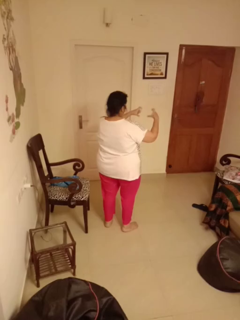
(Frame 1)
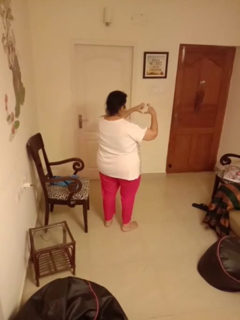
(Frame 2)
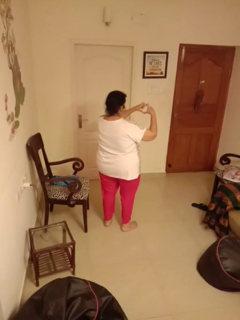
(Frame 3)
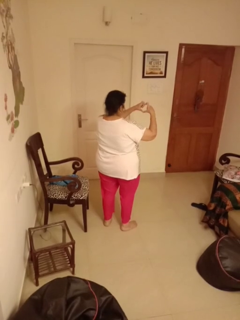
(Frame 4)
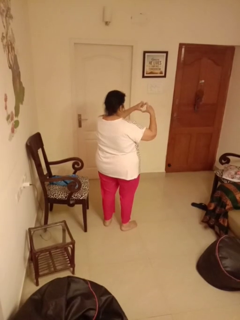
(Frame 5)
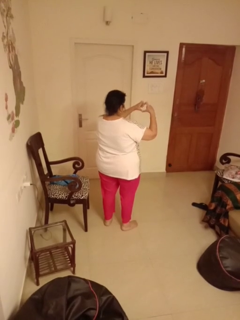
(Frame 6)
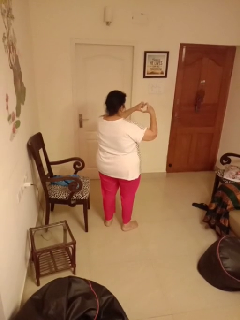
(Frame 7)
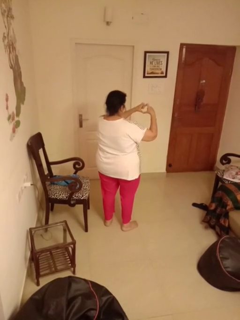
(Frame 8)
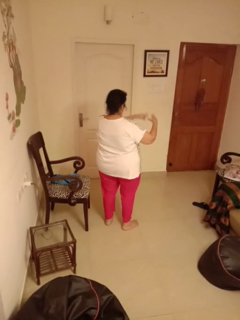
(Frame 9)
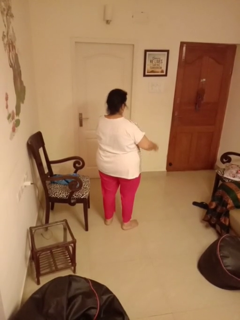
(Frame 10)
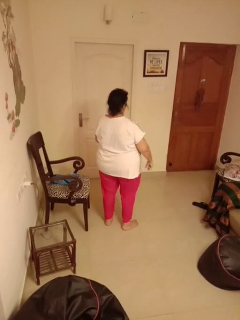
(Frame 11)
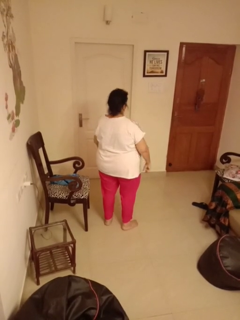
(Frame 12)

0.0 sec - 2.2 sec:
person gestures heart

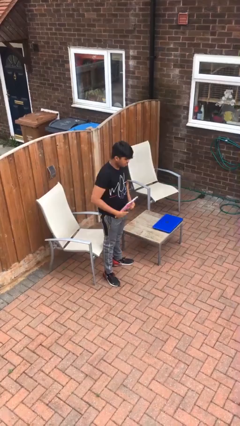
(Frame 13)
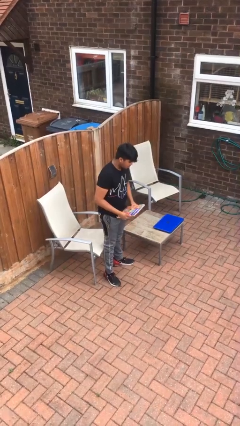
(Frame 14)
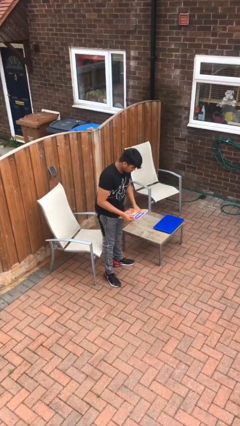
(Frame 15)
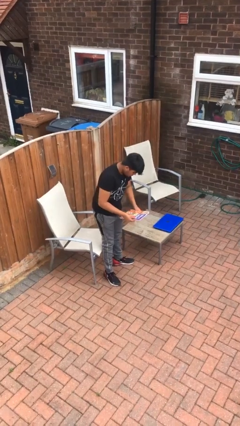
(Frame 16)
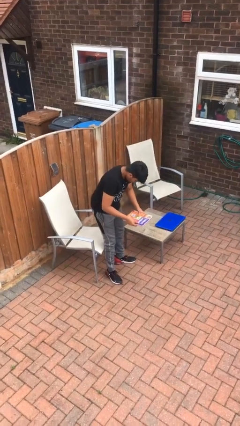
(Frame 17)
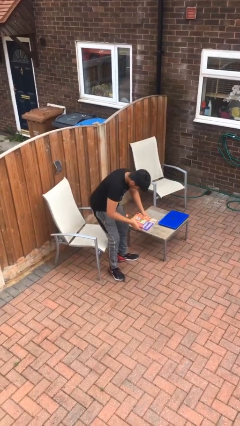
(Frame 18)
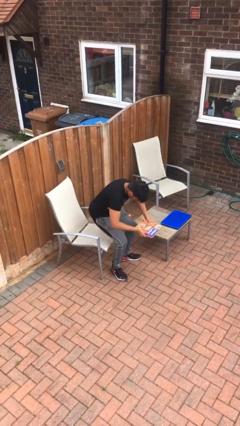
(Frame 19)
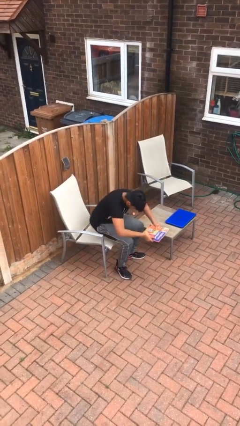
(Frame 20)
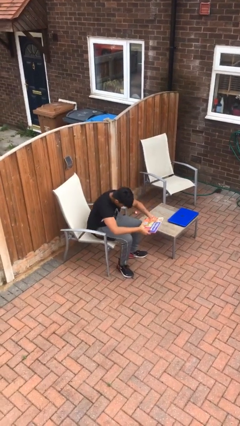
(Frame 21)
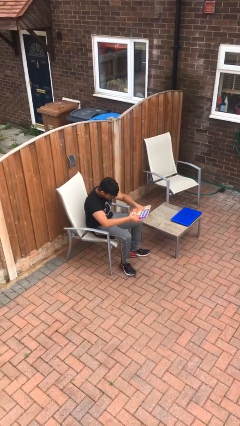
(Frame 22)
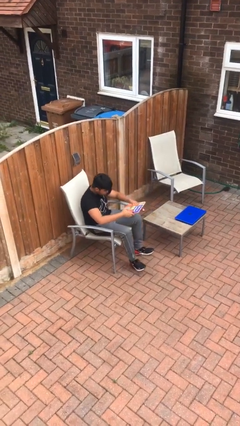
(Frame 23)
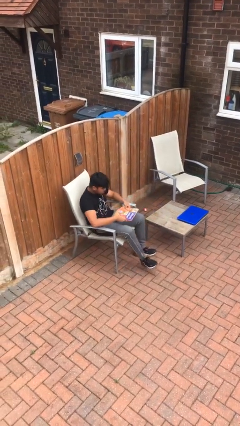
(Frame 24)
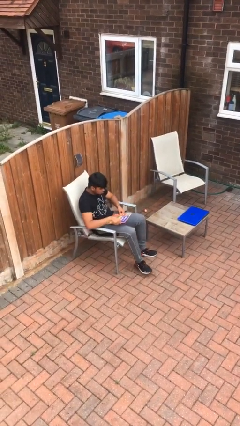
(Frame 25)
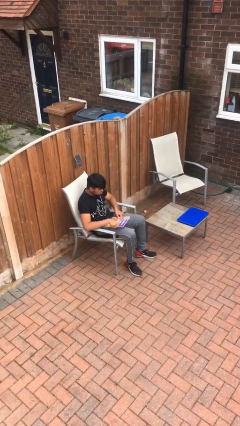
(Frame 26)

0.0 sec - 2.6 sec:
person sits down

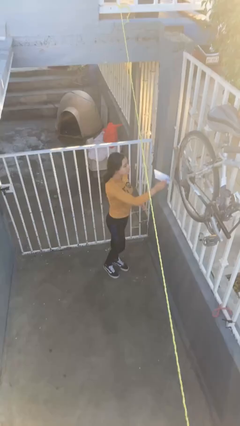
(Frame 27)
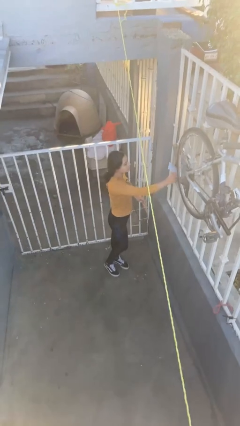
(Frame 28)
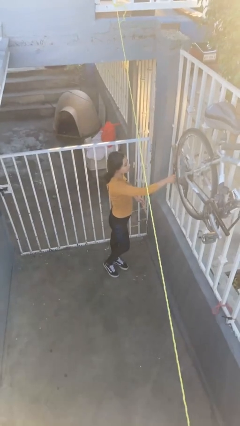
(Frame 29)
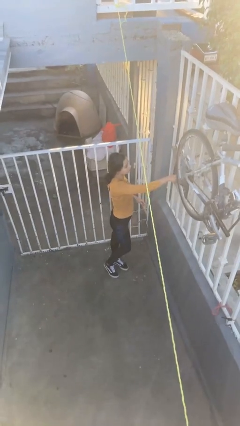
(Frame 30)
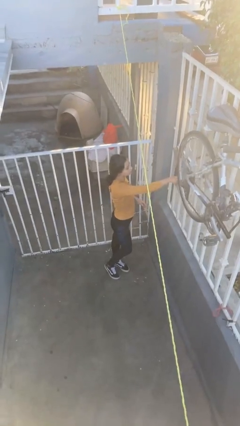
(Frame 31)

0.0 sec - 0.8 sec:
person puts letters in mailbox

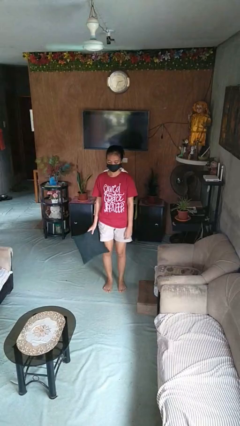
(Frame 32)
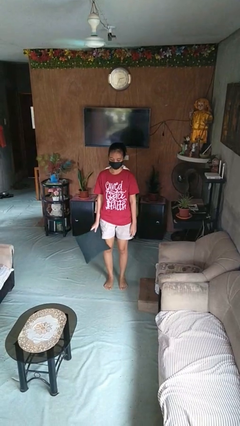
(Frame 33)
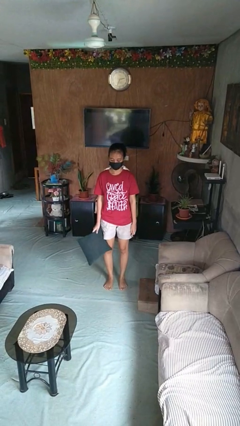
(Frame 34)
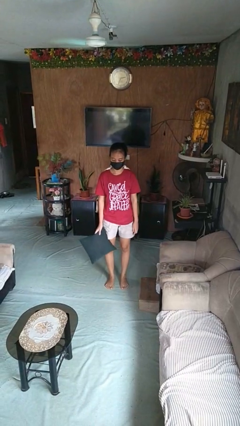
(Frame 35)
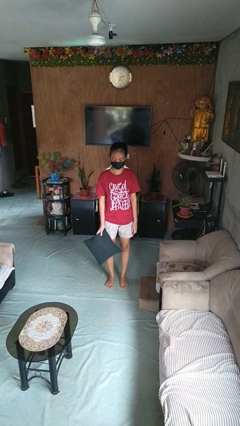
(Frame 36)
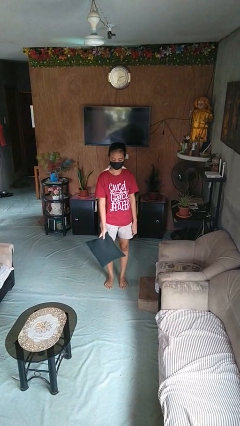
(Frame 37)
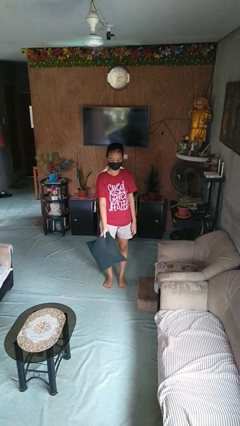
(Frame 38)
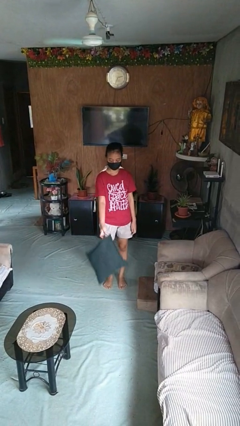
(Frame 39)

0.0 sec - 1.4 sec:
person throws object to ground

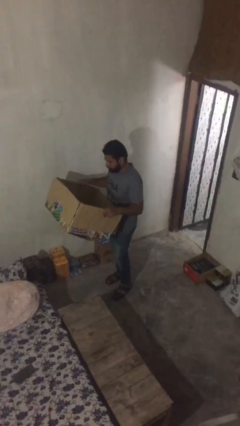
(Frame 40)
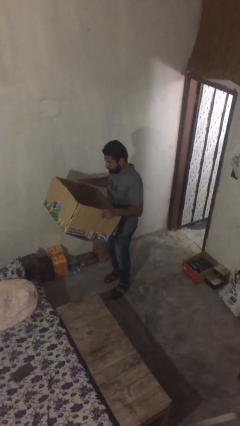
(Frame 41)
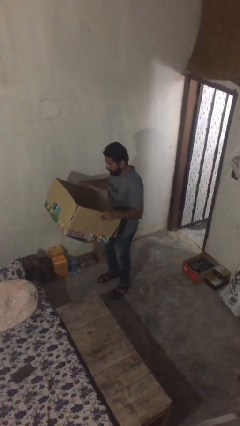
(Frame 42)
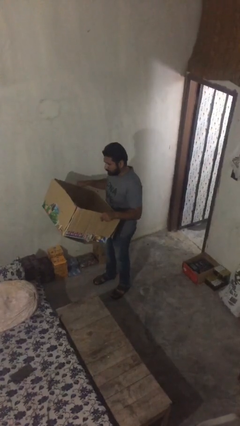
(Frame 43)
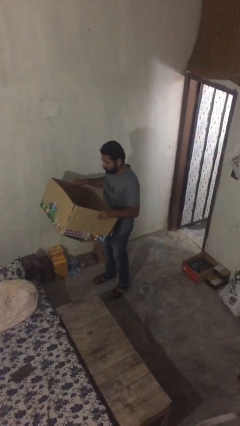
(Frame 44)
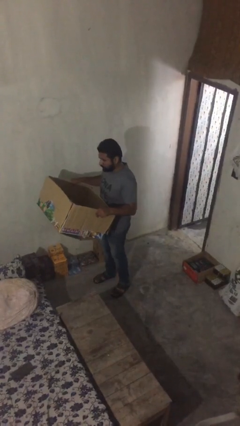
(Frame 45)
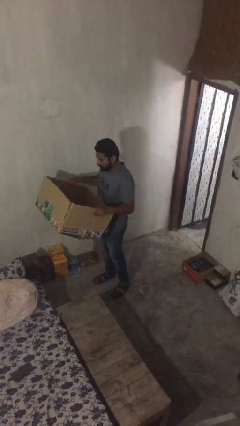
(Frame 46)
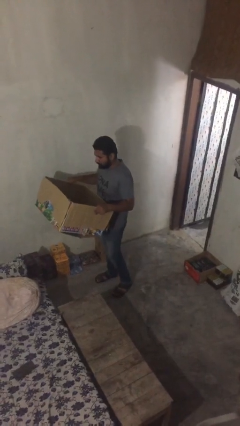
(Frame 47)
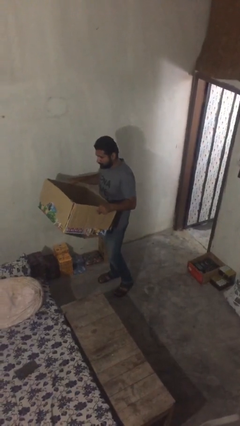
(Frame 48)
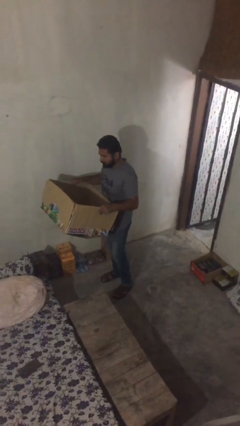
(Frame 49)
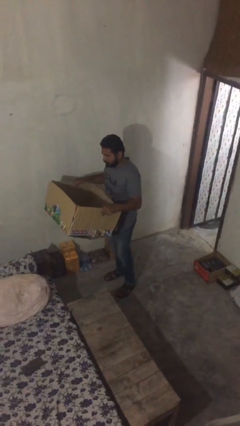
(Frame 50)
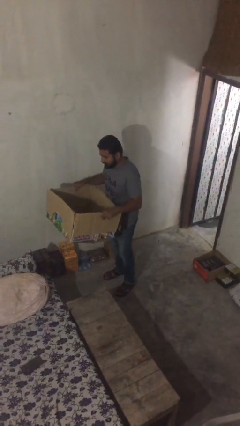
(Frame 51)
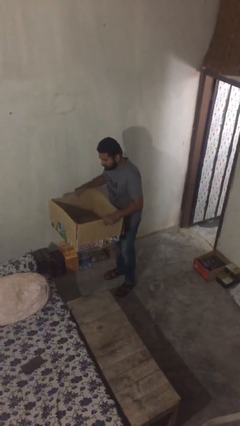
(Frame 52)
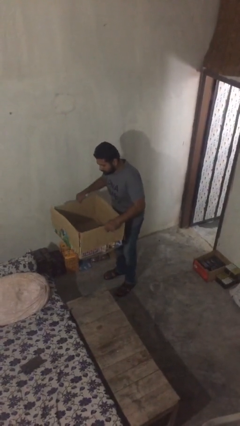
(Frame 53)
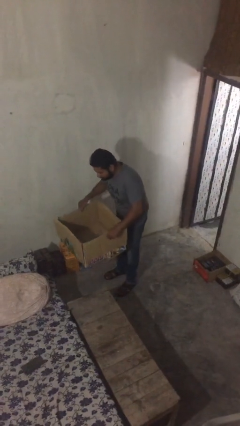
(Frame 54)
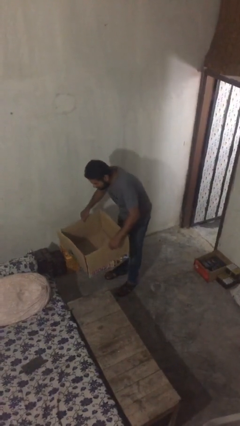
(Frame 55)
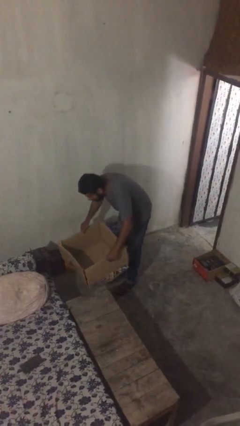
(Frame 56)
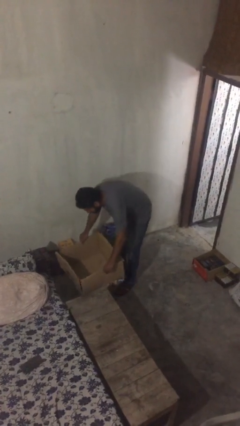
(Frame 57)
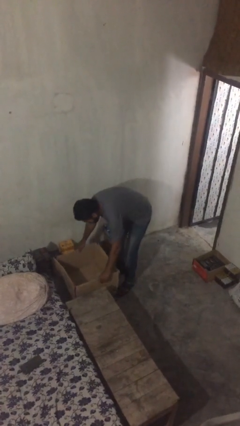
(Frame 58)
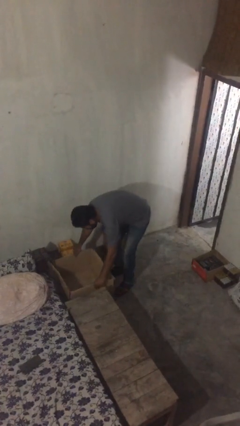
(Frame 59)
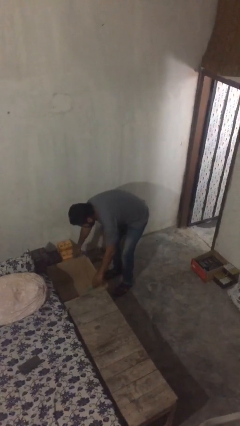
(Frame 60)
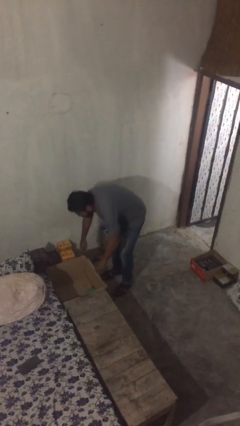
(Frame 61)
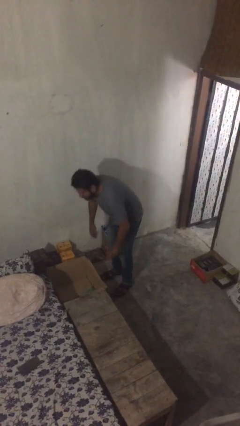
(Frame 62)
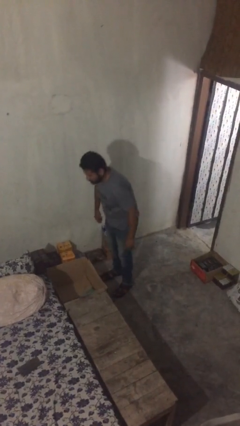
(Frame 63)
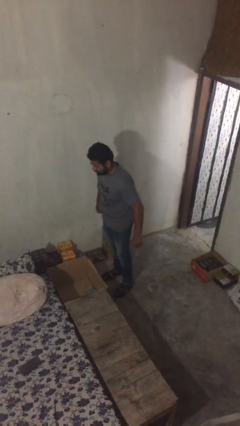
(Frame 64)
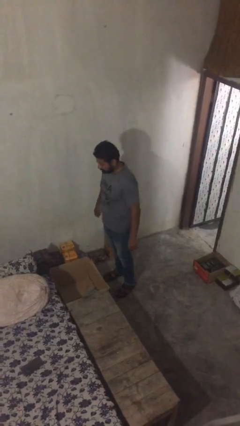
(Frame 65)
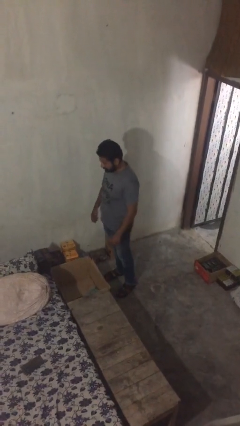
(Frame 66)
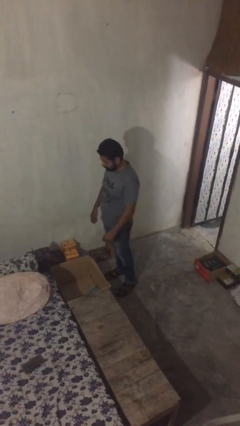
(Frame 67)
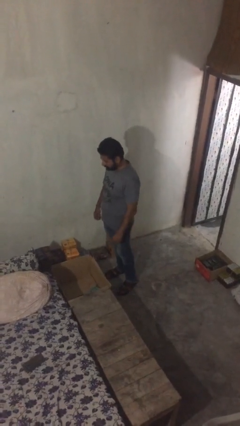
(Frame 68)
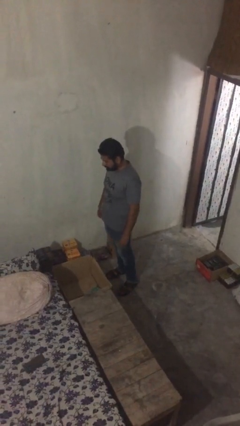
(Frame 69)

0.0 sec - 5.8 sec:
person puts down object on floor

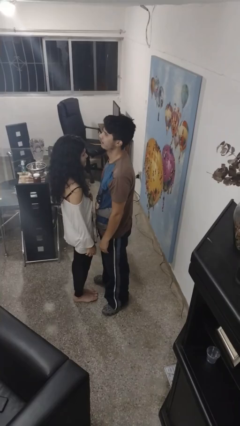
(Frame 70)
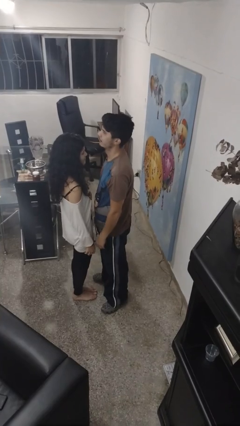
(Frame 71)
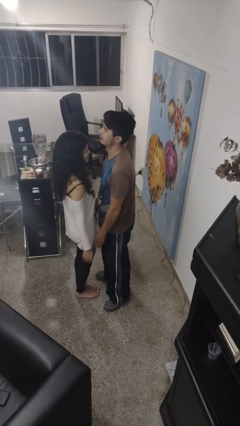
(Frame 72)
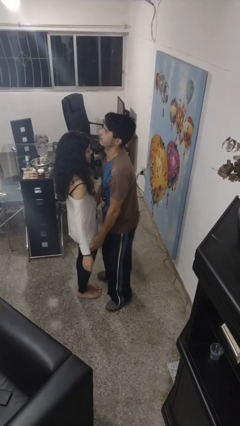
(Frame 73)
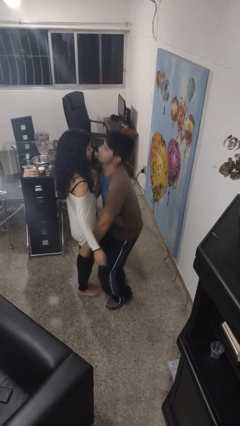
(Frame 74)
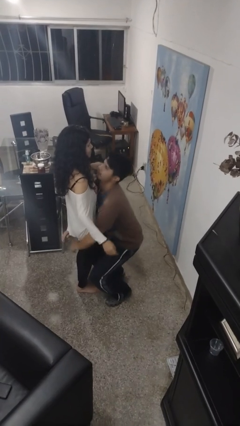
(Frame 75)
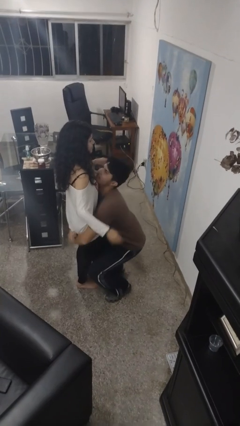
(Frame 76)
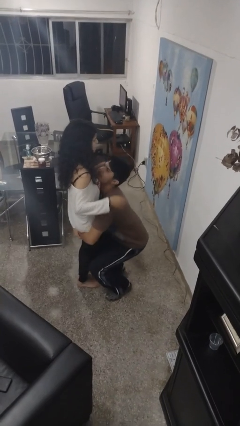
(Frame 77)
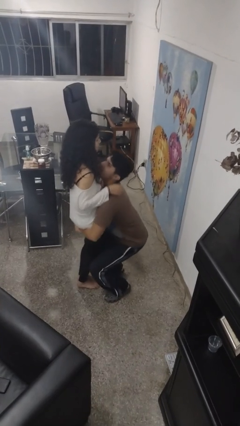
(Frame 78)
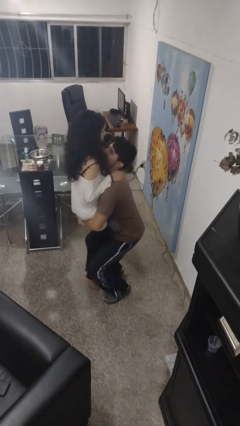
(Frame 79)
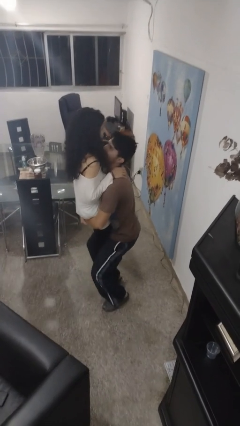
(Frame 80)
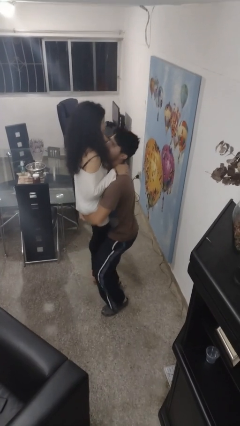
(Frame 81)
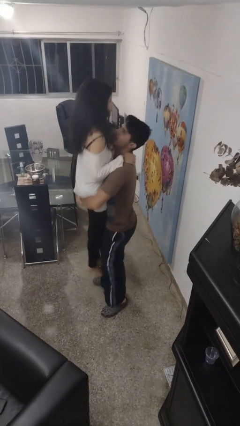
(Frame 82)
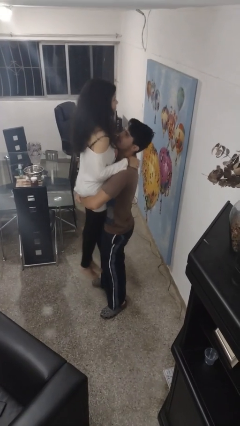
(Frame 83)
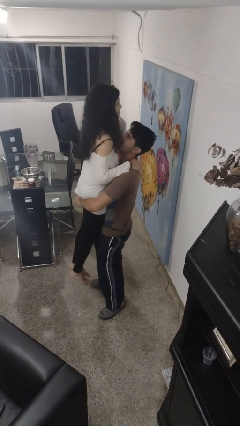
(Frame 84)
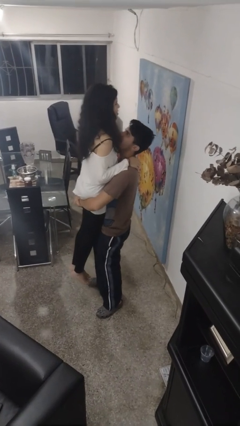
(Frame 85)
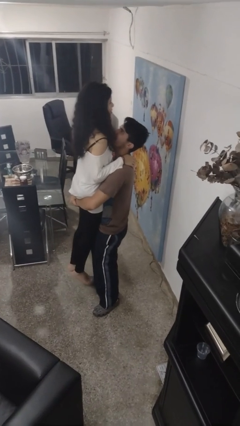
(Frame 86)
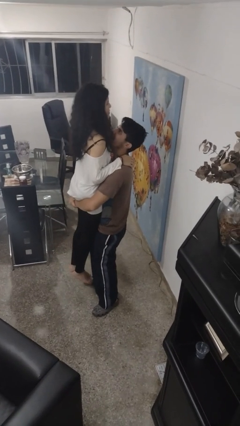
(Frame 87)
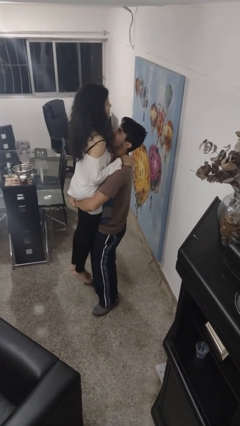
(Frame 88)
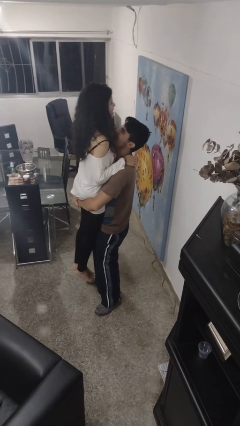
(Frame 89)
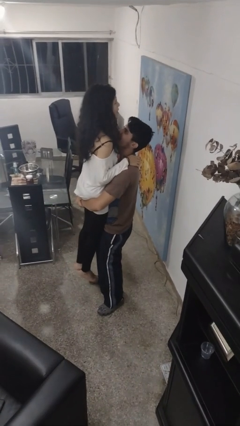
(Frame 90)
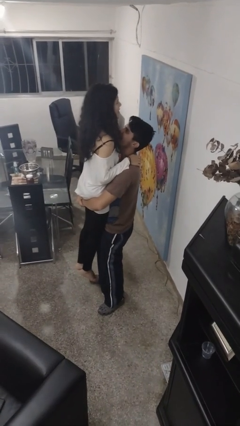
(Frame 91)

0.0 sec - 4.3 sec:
person picks up person

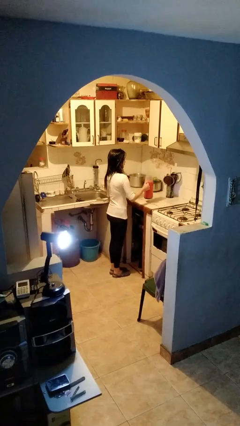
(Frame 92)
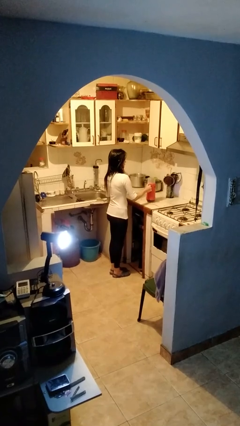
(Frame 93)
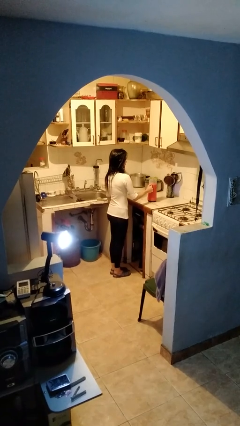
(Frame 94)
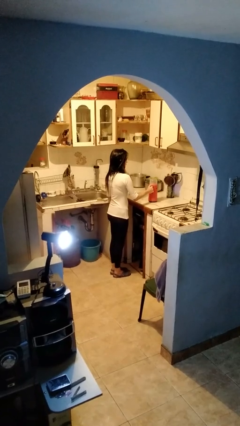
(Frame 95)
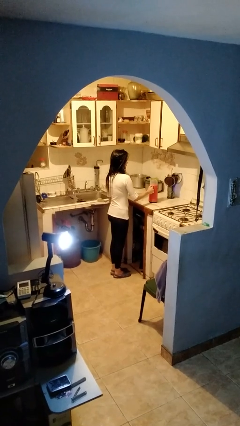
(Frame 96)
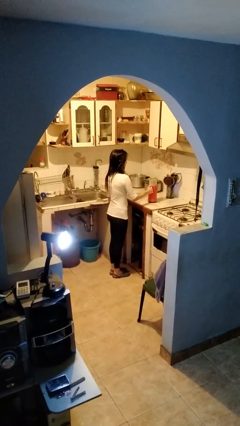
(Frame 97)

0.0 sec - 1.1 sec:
person puts down object on countertop
